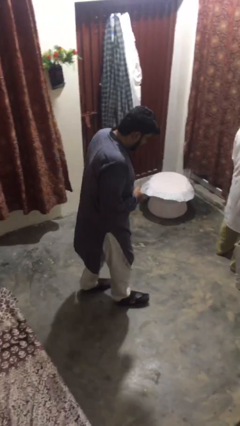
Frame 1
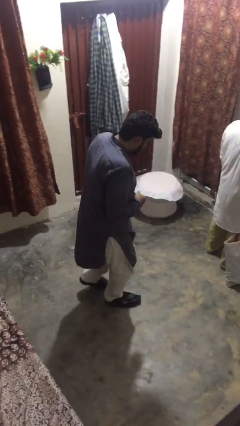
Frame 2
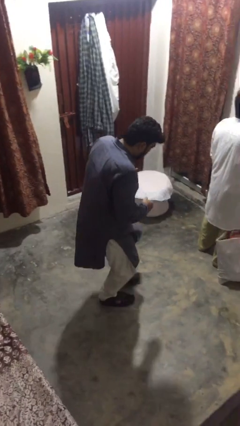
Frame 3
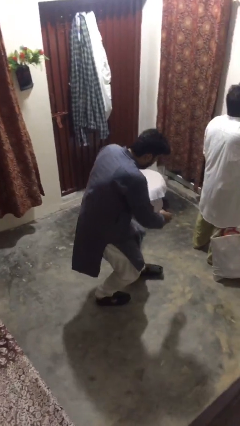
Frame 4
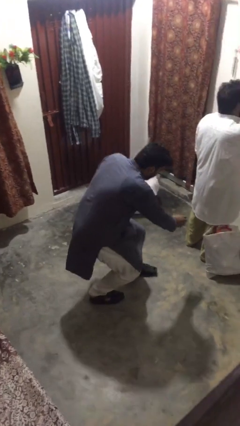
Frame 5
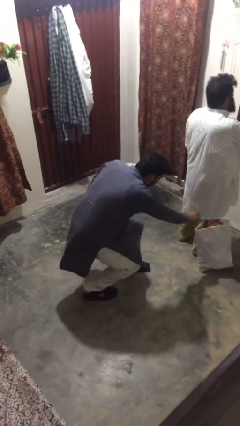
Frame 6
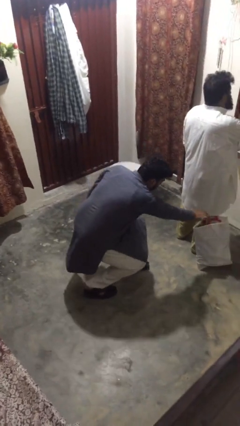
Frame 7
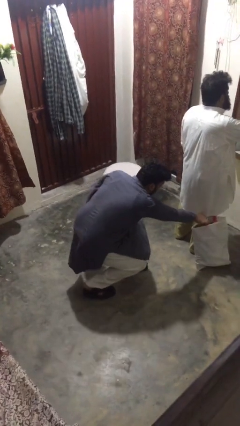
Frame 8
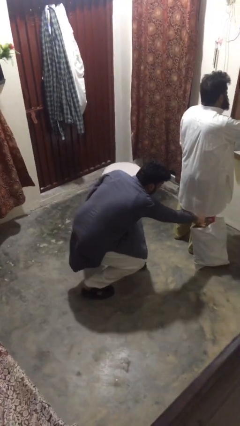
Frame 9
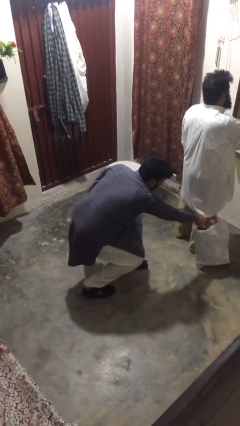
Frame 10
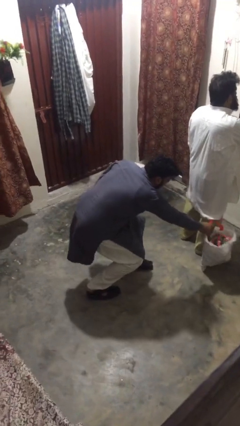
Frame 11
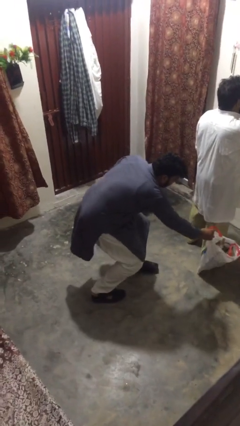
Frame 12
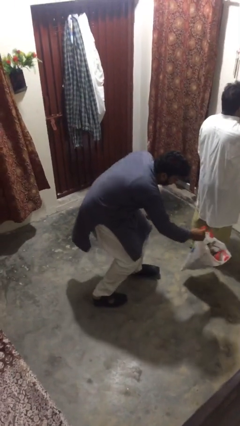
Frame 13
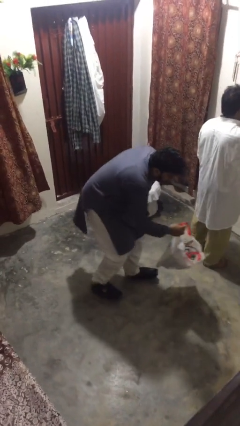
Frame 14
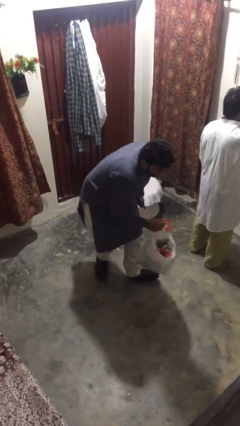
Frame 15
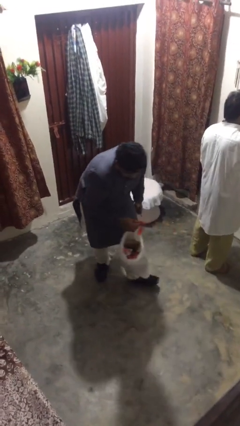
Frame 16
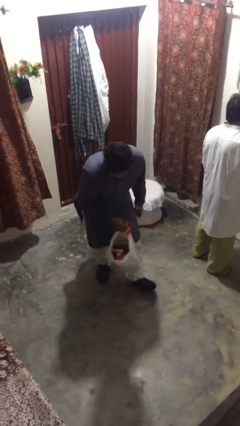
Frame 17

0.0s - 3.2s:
person steals object from person

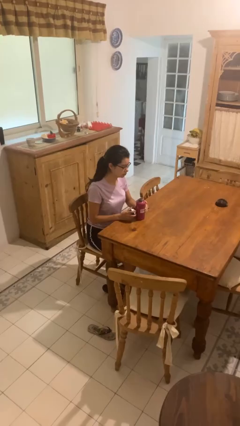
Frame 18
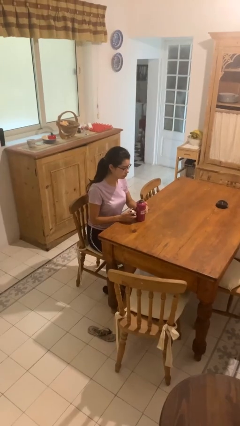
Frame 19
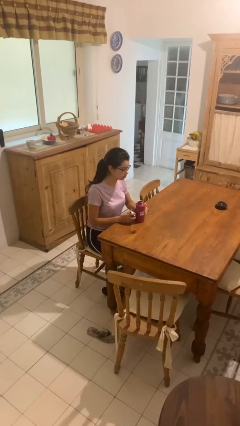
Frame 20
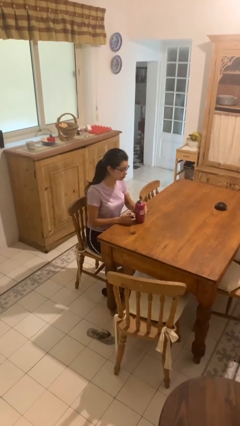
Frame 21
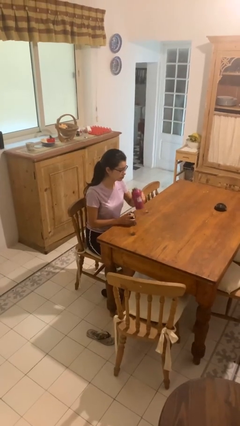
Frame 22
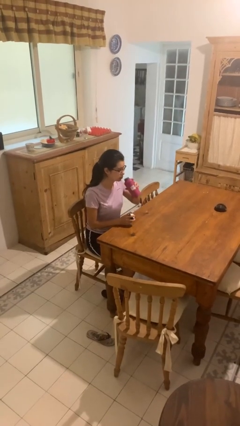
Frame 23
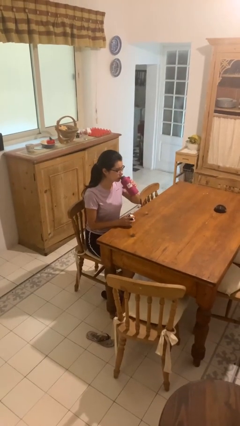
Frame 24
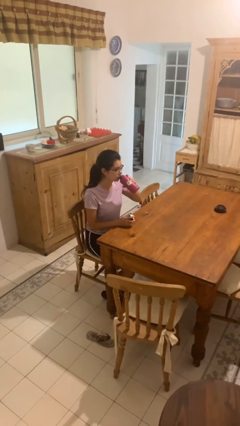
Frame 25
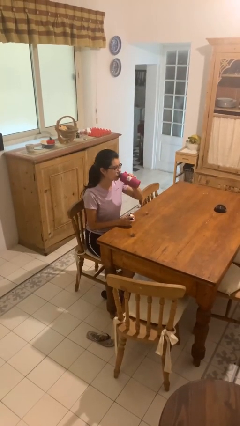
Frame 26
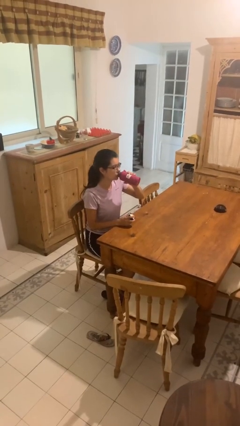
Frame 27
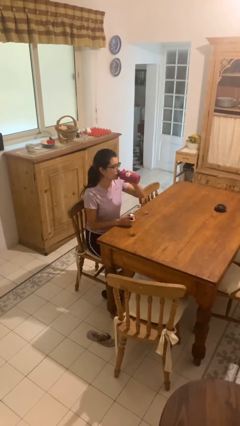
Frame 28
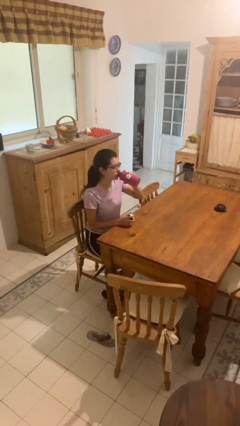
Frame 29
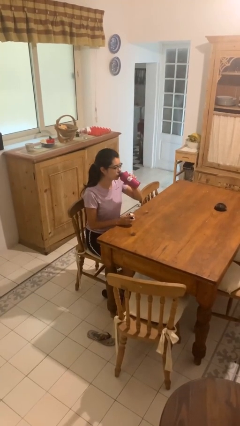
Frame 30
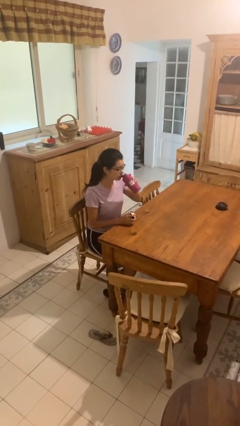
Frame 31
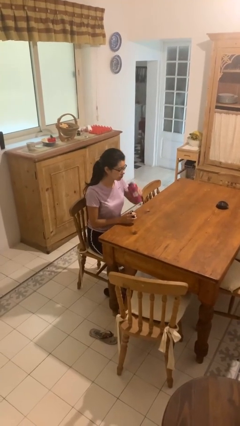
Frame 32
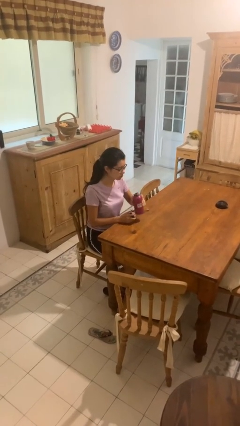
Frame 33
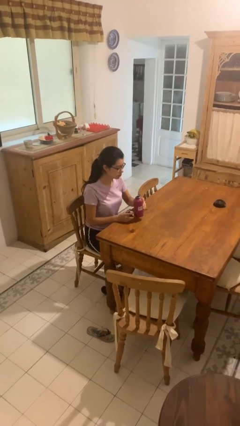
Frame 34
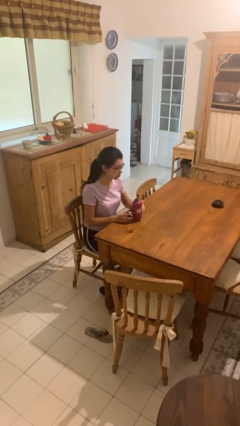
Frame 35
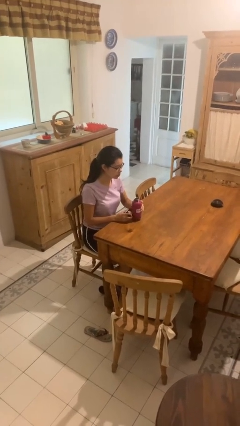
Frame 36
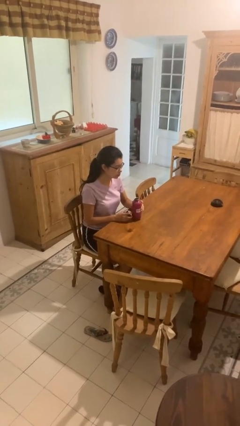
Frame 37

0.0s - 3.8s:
person drinks from bottle

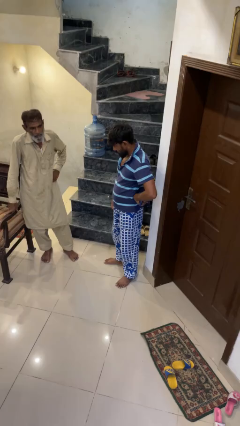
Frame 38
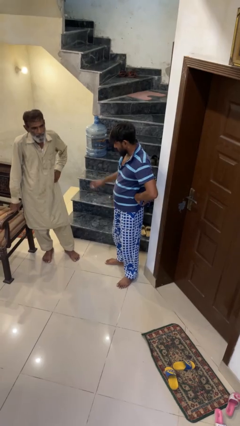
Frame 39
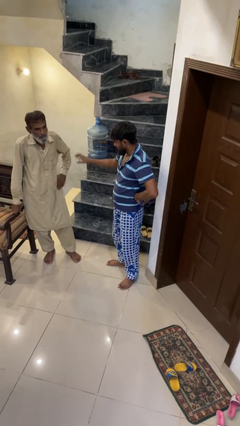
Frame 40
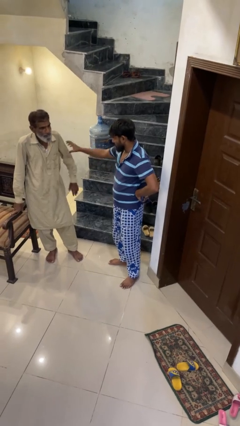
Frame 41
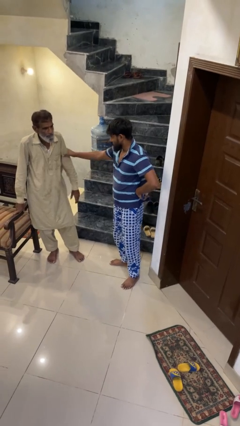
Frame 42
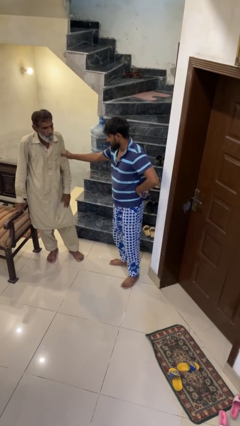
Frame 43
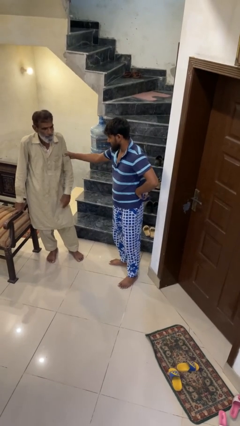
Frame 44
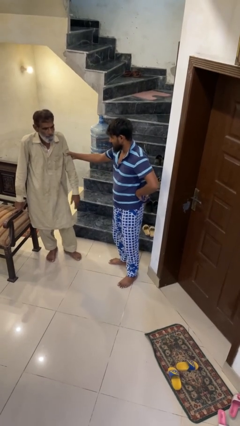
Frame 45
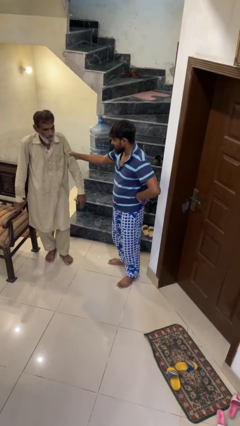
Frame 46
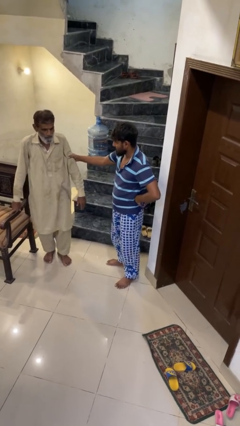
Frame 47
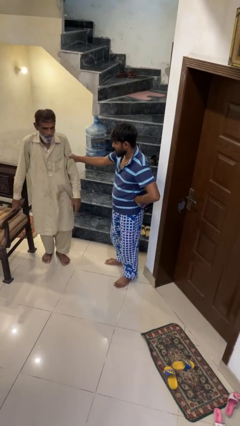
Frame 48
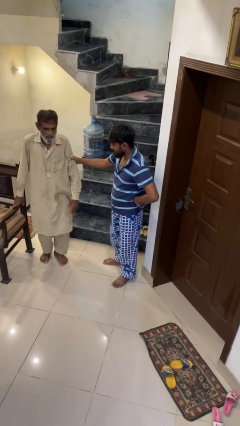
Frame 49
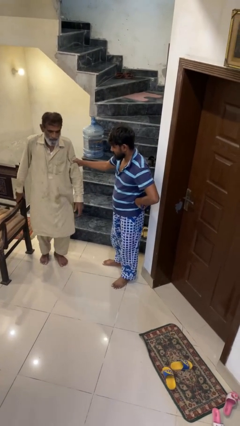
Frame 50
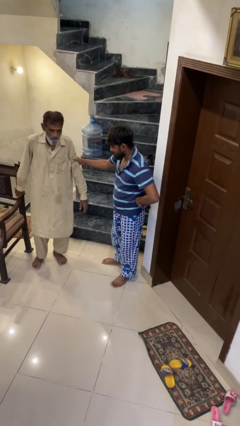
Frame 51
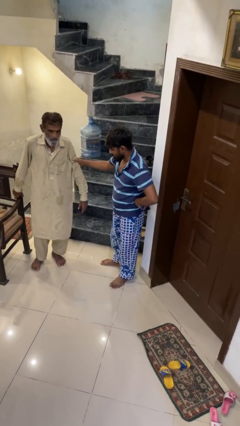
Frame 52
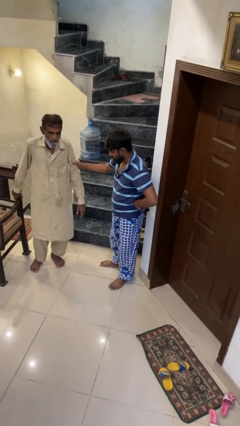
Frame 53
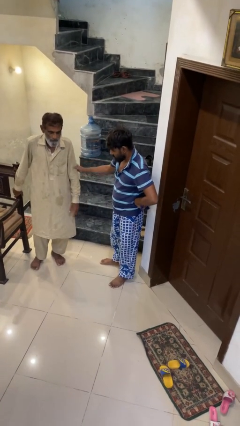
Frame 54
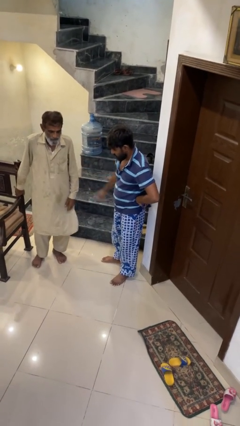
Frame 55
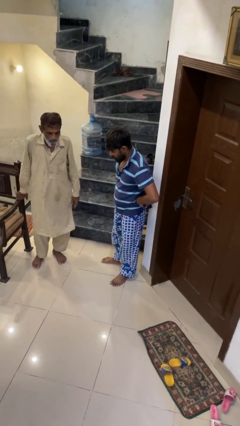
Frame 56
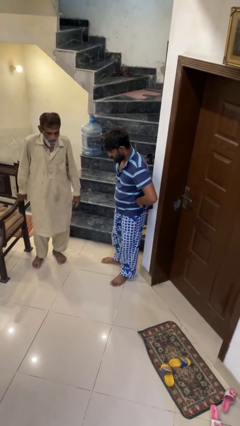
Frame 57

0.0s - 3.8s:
person grabs person by bicep

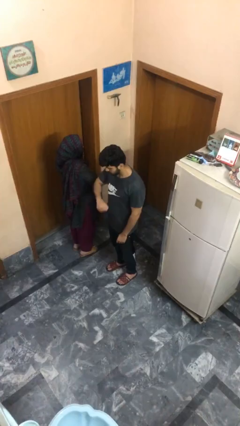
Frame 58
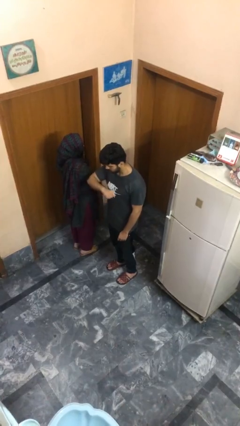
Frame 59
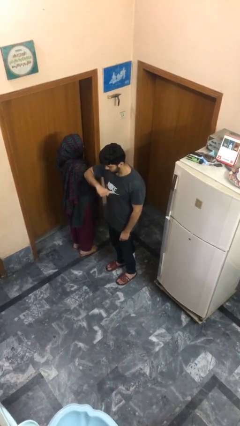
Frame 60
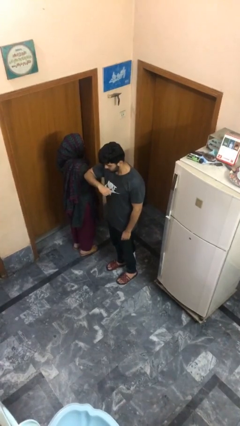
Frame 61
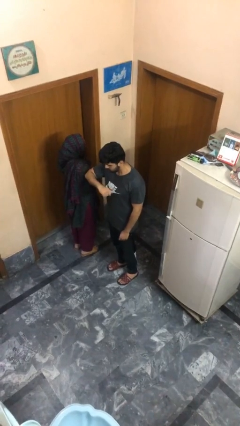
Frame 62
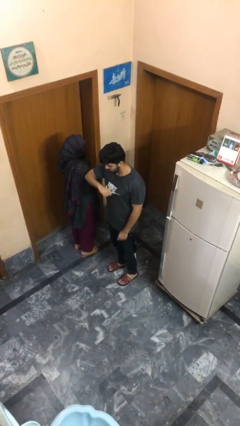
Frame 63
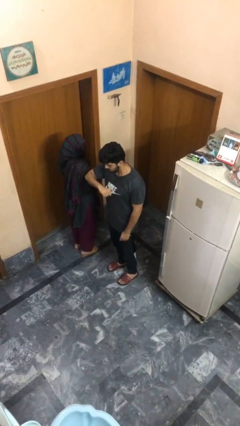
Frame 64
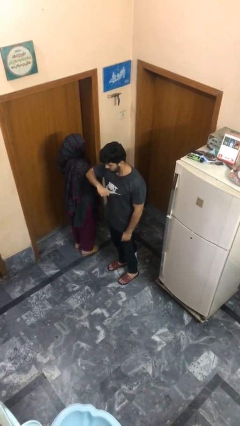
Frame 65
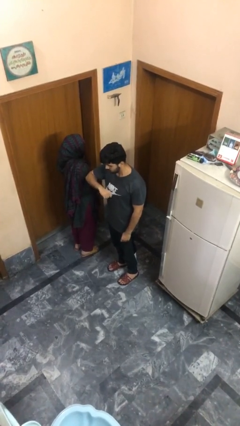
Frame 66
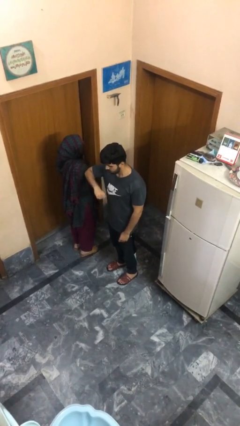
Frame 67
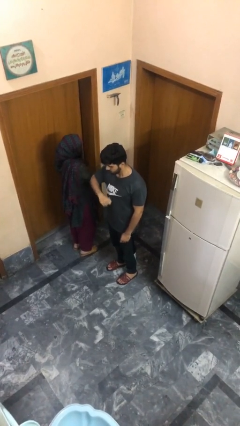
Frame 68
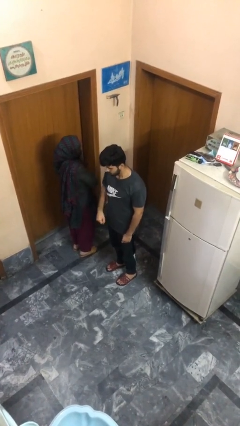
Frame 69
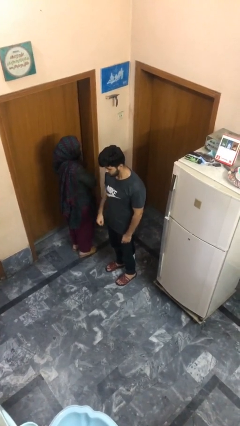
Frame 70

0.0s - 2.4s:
person nudges person with elbow

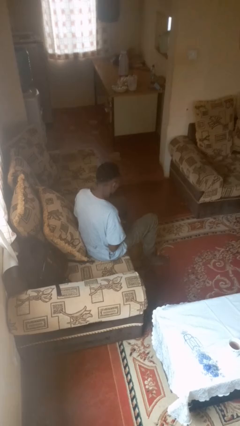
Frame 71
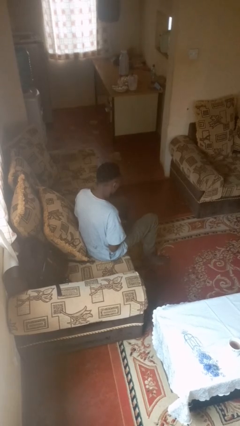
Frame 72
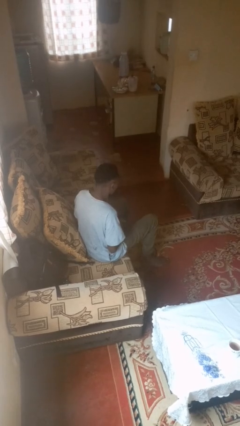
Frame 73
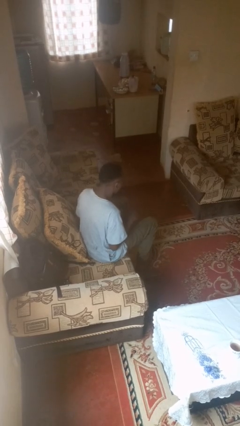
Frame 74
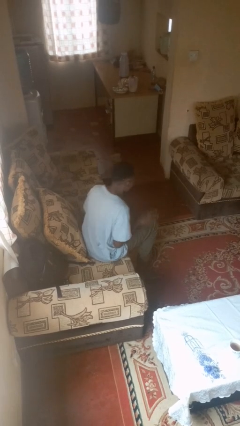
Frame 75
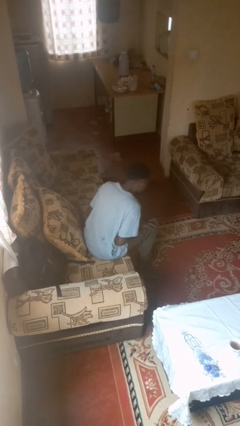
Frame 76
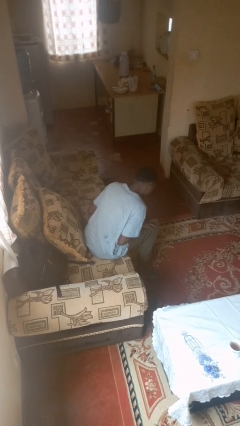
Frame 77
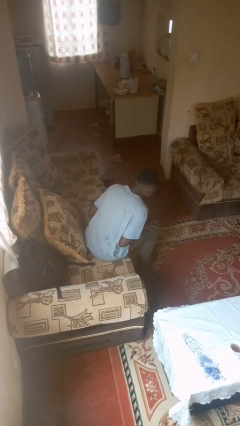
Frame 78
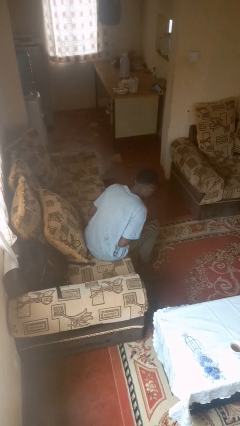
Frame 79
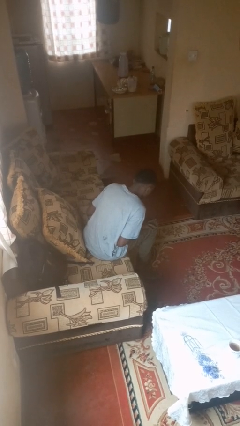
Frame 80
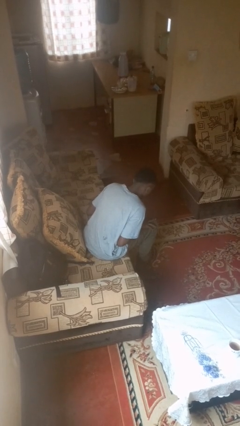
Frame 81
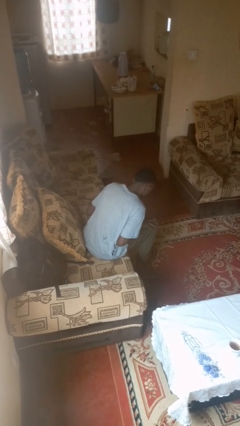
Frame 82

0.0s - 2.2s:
person slaps hands on thighs

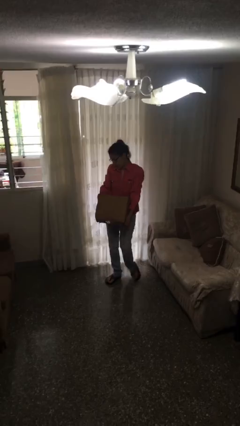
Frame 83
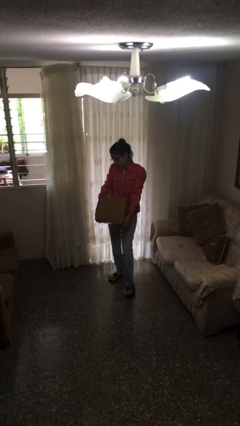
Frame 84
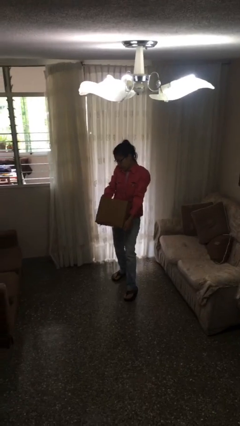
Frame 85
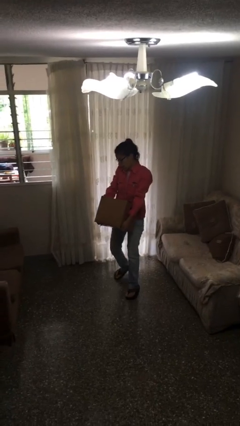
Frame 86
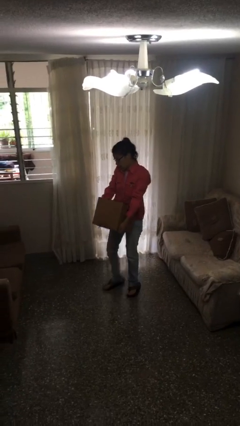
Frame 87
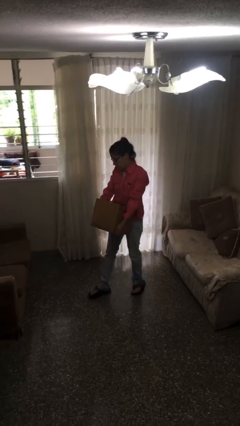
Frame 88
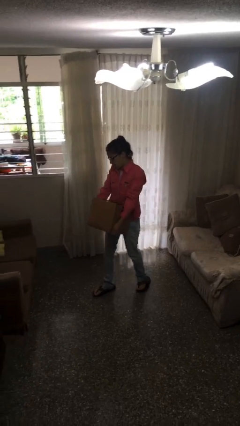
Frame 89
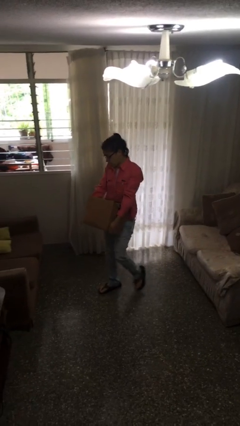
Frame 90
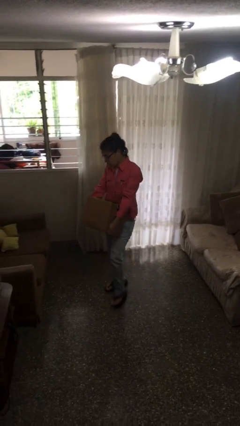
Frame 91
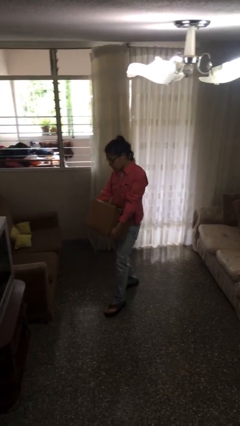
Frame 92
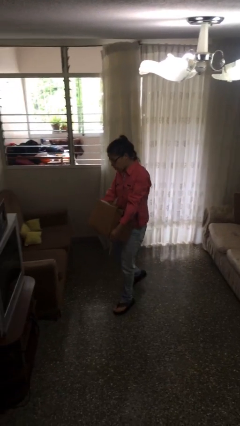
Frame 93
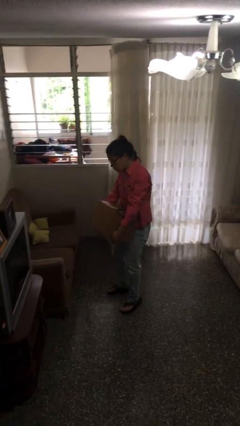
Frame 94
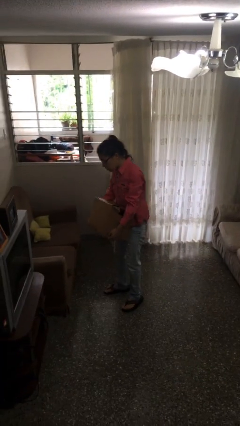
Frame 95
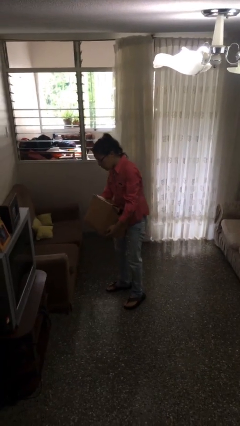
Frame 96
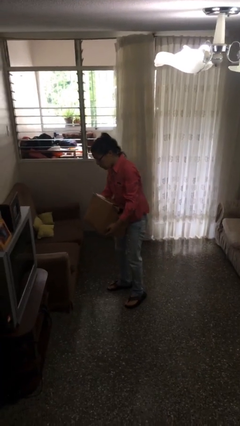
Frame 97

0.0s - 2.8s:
person carries heavy object
